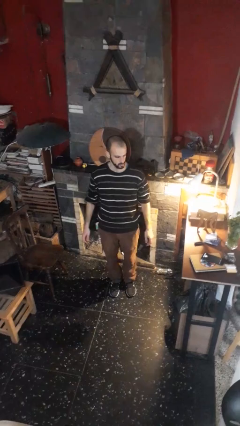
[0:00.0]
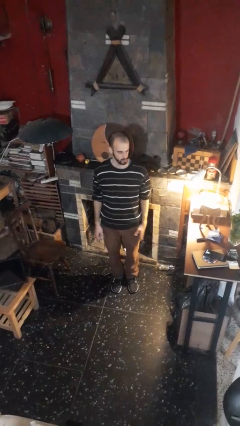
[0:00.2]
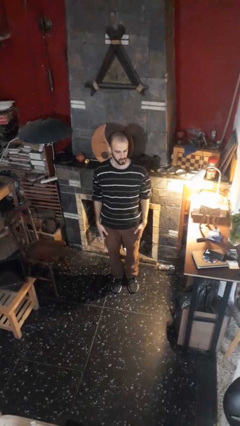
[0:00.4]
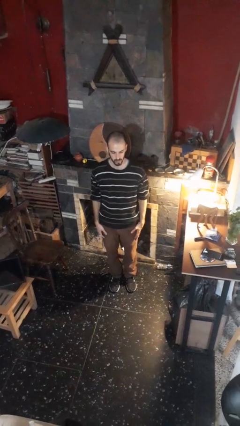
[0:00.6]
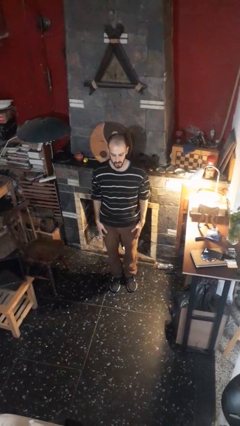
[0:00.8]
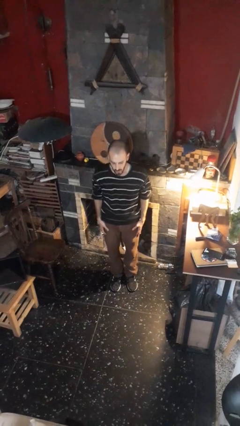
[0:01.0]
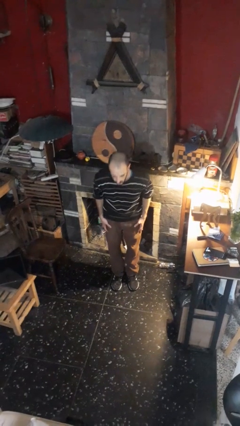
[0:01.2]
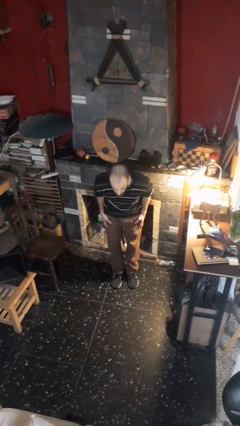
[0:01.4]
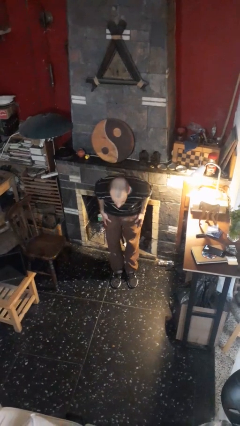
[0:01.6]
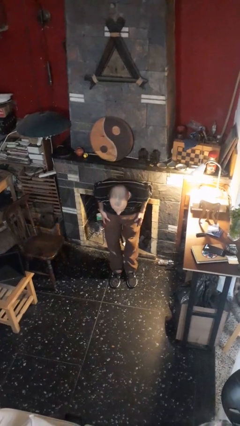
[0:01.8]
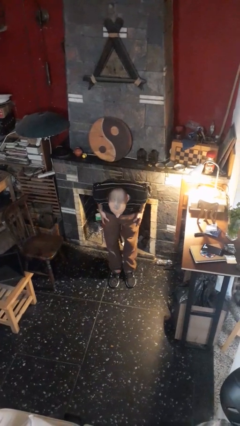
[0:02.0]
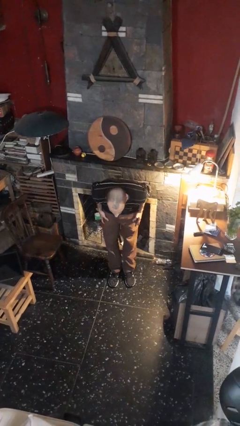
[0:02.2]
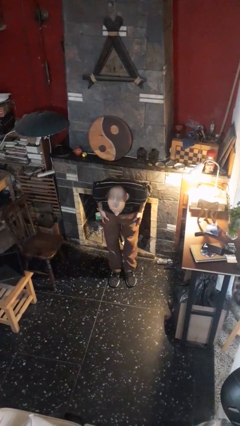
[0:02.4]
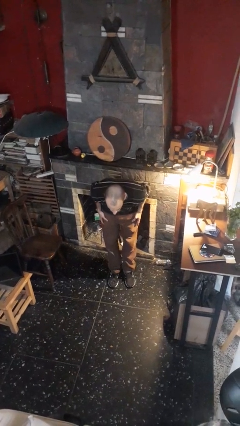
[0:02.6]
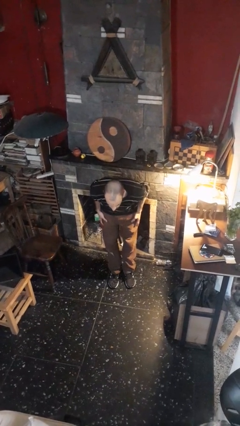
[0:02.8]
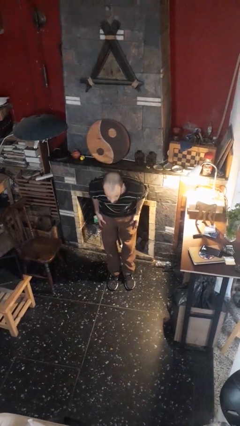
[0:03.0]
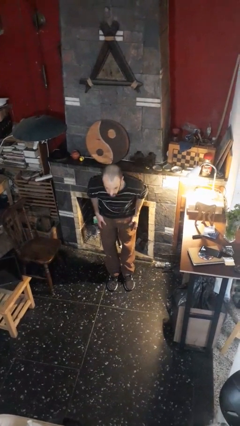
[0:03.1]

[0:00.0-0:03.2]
person bows

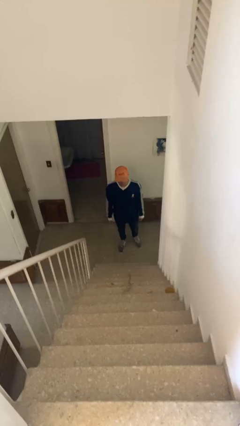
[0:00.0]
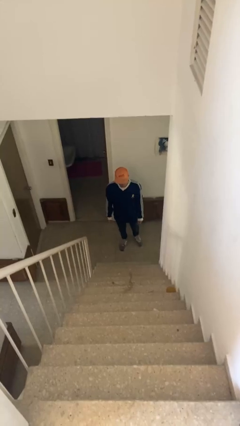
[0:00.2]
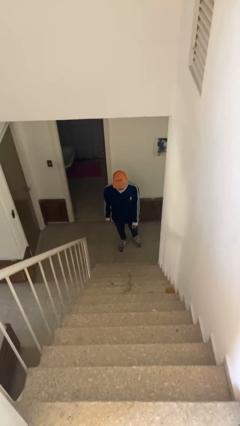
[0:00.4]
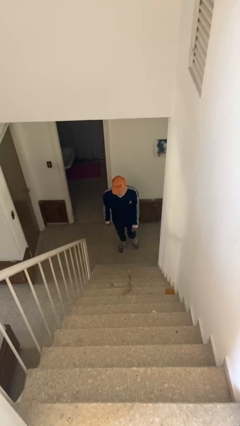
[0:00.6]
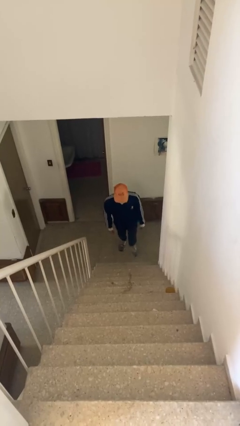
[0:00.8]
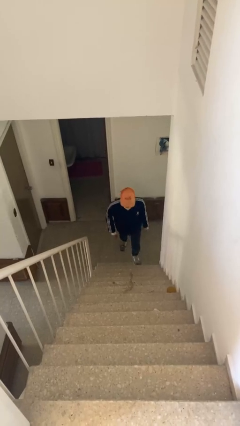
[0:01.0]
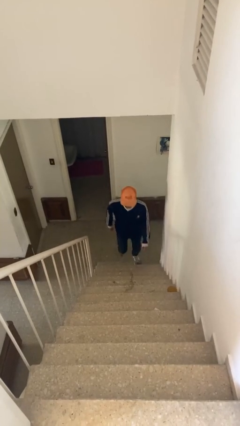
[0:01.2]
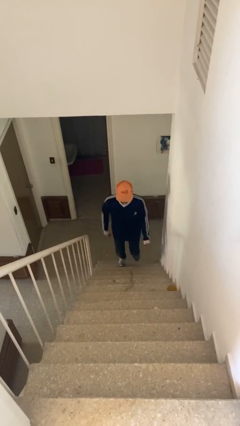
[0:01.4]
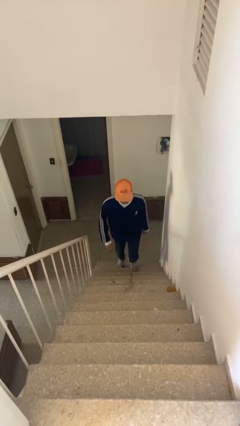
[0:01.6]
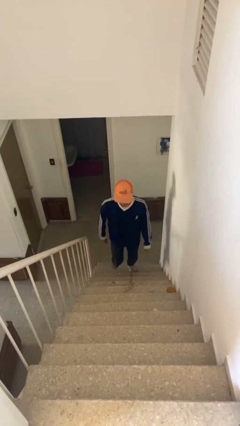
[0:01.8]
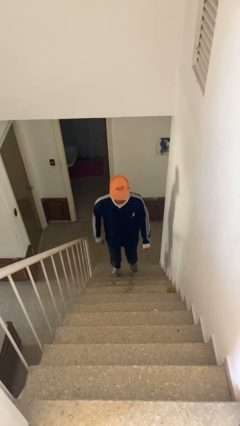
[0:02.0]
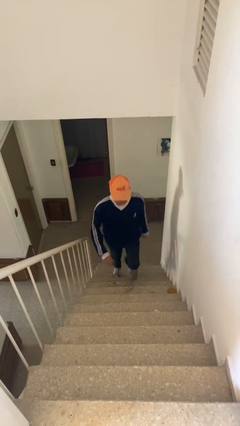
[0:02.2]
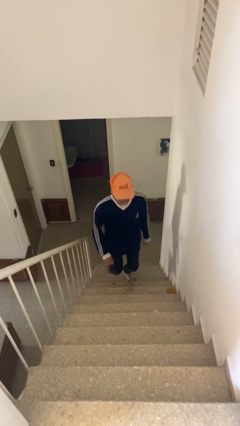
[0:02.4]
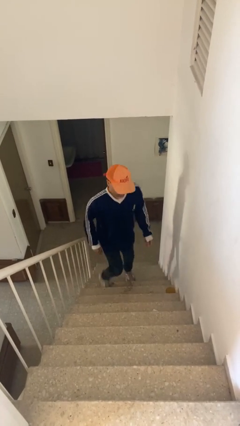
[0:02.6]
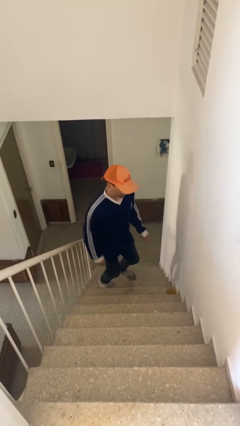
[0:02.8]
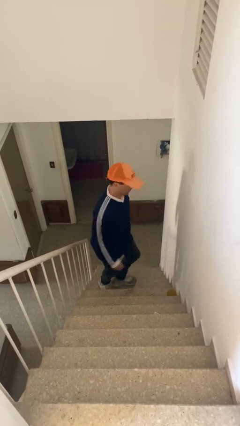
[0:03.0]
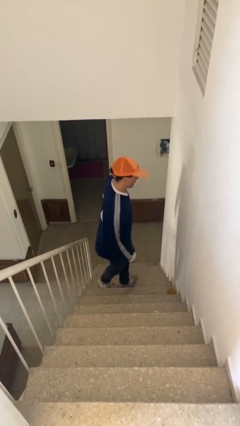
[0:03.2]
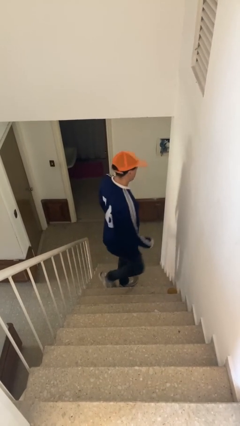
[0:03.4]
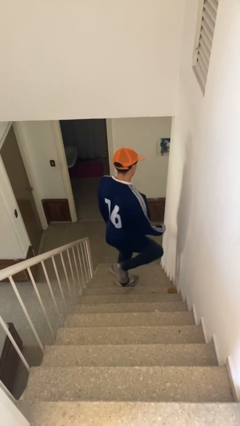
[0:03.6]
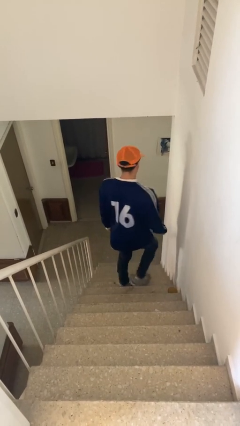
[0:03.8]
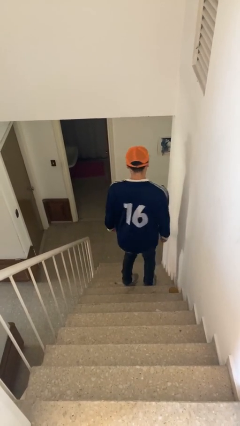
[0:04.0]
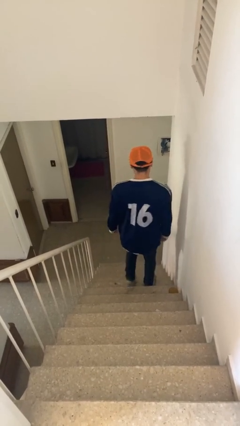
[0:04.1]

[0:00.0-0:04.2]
person climbs up stairs

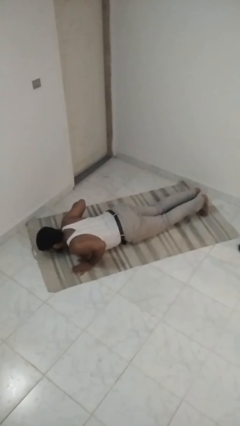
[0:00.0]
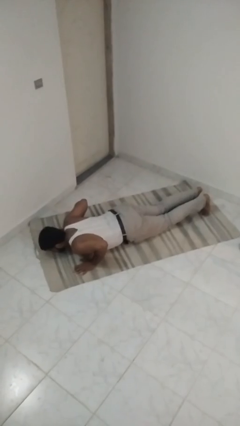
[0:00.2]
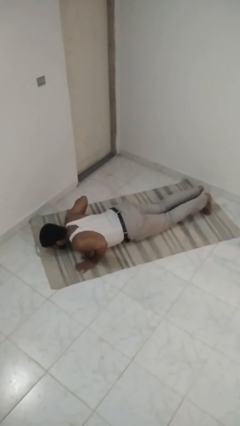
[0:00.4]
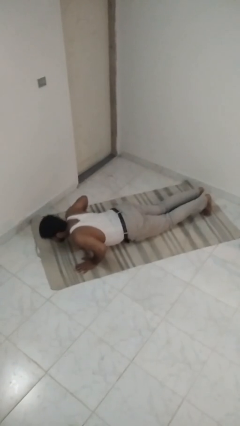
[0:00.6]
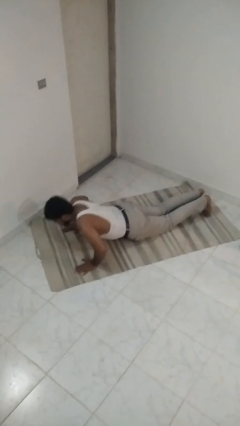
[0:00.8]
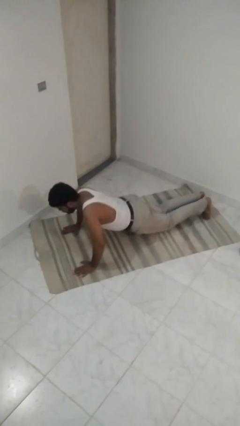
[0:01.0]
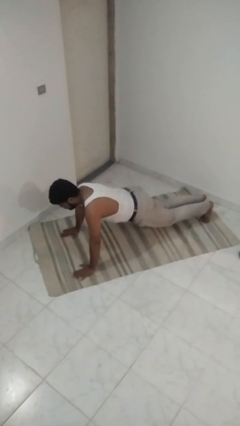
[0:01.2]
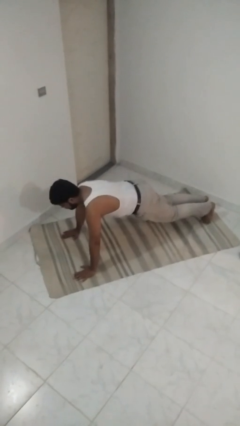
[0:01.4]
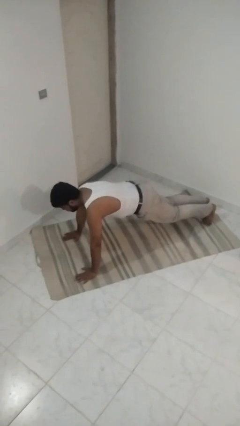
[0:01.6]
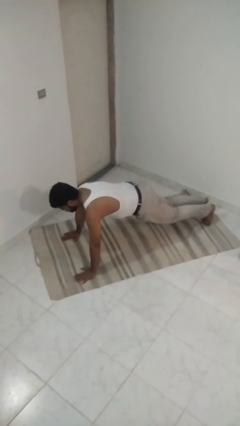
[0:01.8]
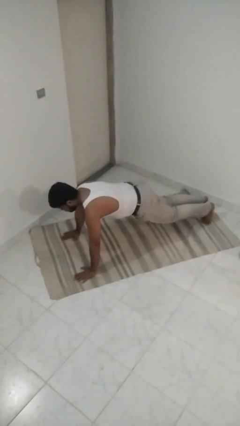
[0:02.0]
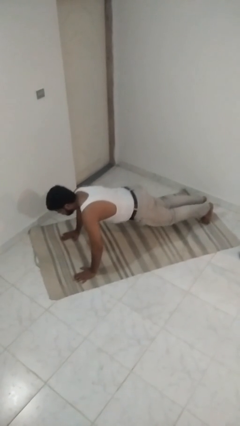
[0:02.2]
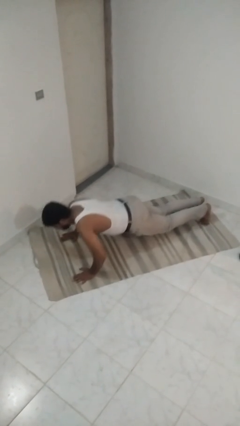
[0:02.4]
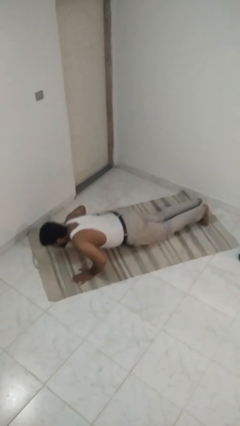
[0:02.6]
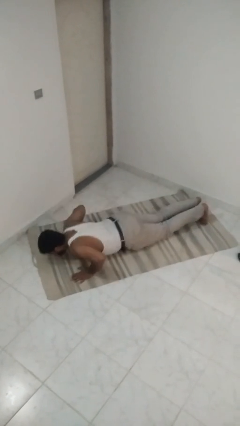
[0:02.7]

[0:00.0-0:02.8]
person exercises with pushup

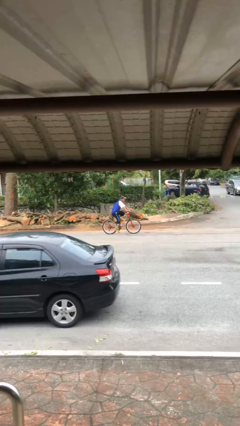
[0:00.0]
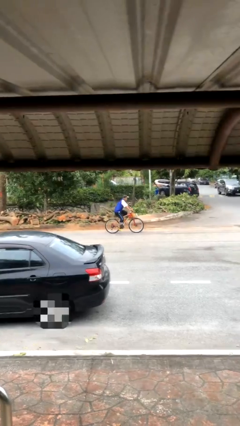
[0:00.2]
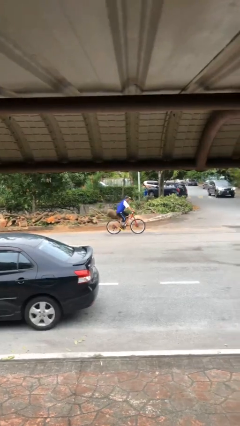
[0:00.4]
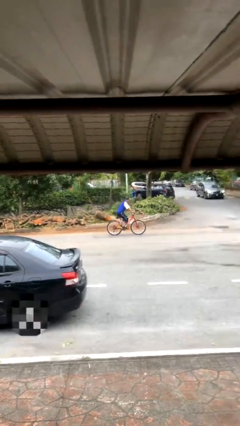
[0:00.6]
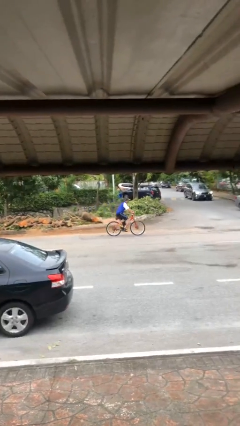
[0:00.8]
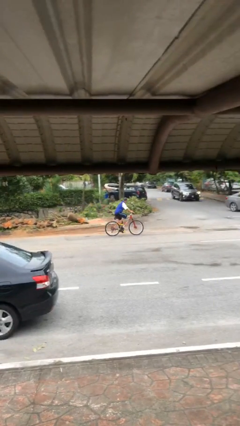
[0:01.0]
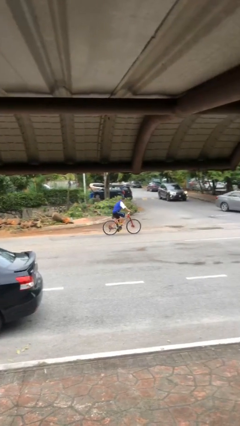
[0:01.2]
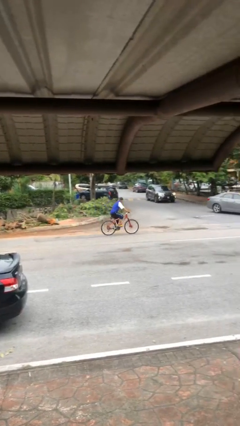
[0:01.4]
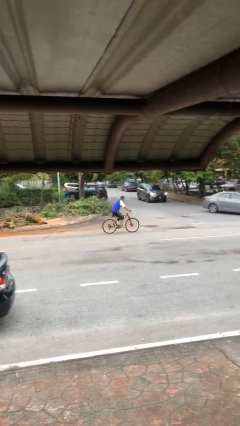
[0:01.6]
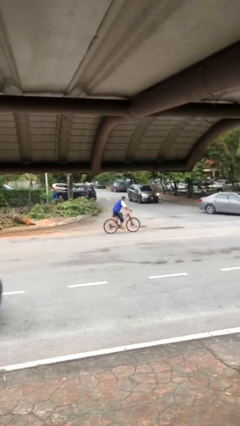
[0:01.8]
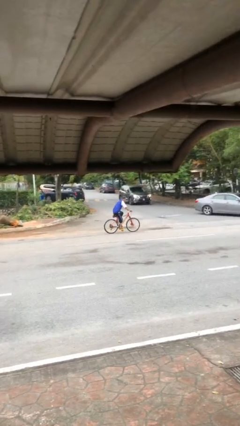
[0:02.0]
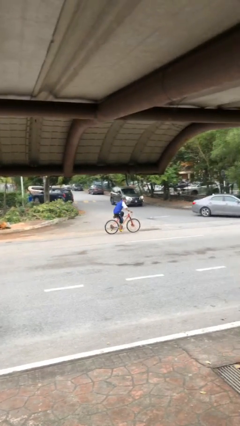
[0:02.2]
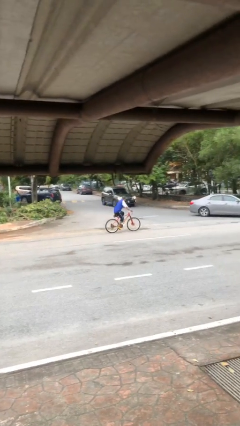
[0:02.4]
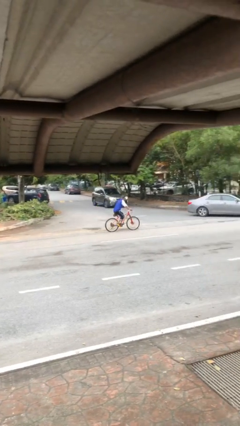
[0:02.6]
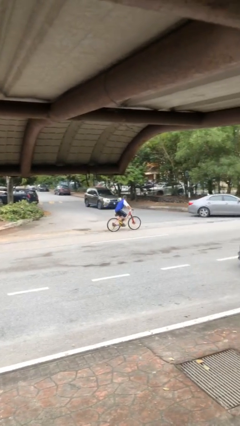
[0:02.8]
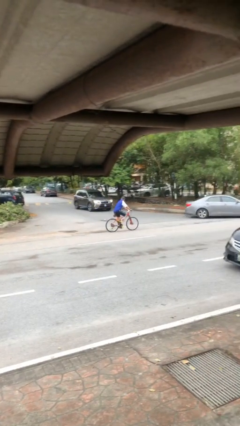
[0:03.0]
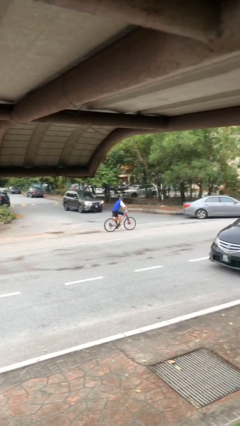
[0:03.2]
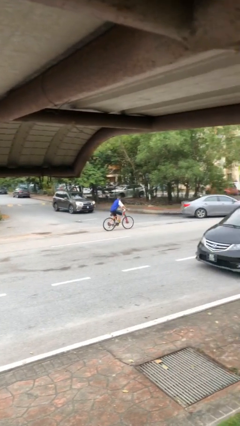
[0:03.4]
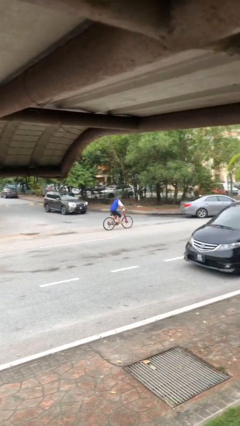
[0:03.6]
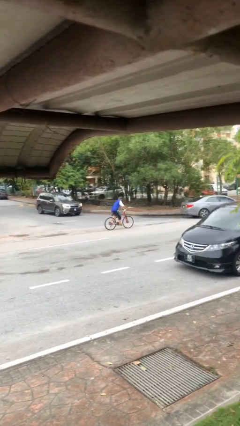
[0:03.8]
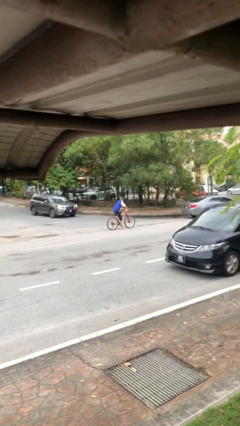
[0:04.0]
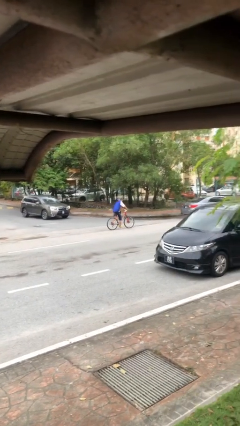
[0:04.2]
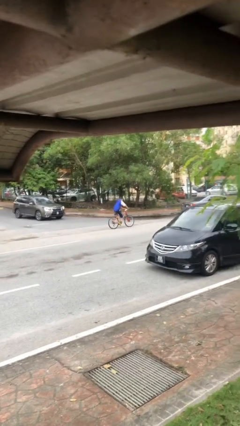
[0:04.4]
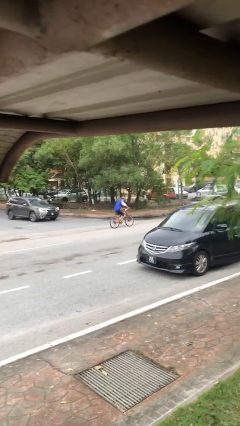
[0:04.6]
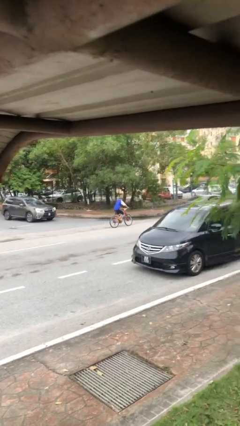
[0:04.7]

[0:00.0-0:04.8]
person rides bicycle

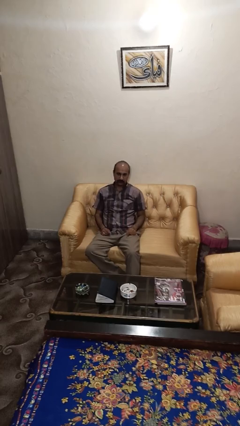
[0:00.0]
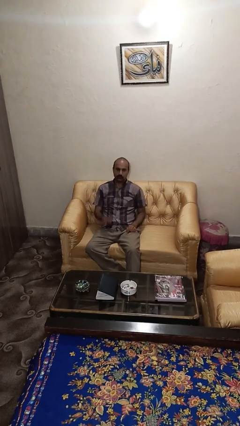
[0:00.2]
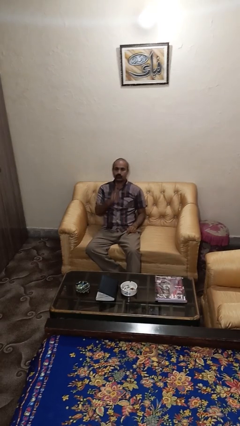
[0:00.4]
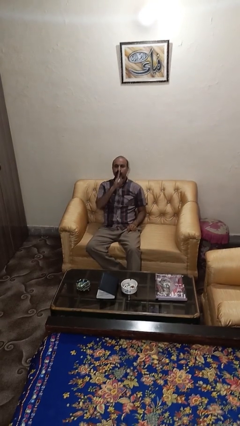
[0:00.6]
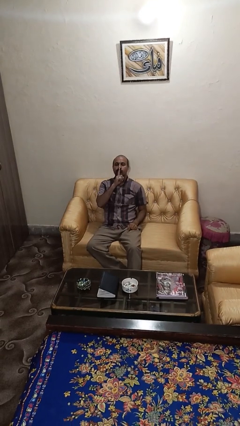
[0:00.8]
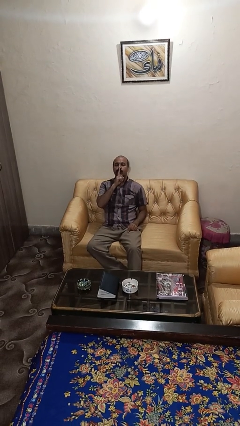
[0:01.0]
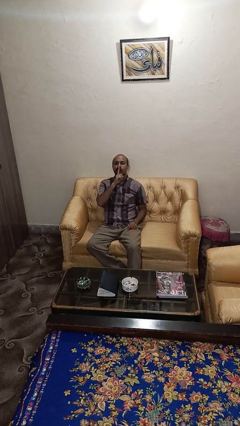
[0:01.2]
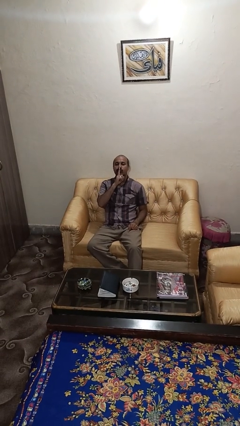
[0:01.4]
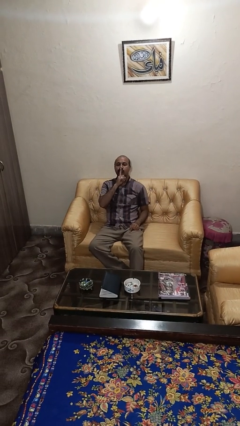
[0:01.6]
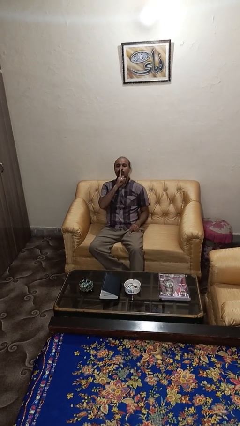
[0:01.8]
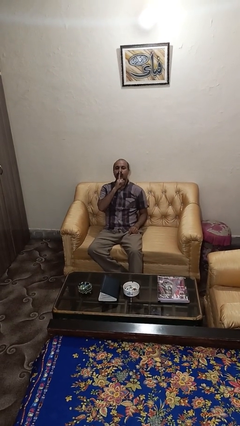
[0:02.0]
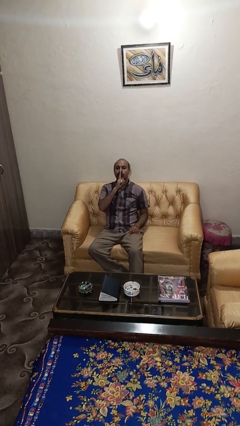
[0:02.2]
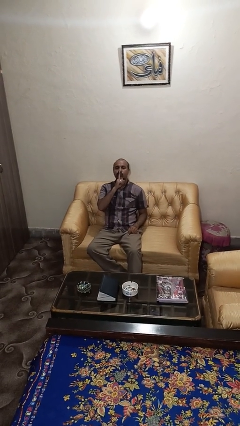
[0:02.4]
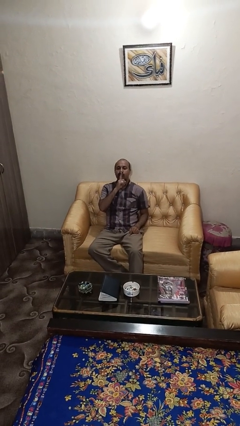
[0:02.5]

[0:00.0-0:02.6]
person gestures be quiet
